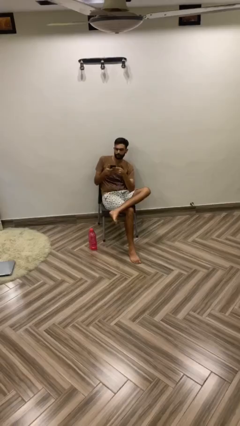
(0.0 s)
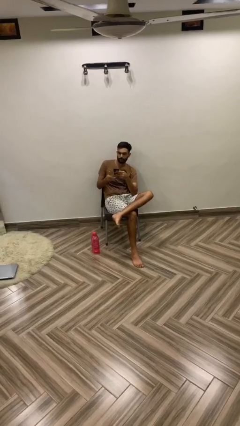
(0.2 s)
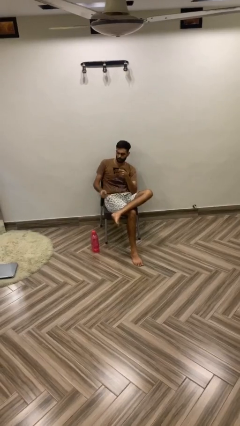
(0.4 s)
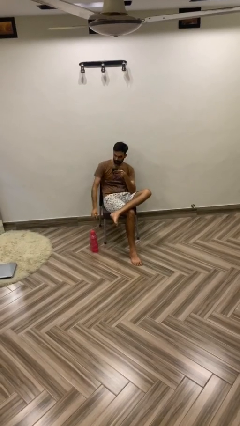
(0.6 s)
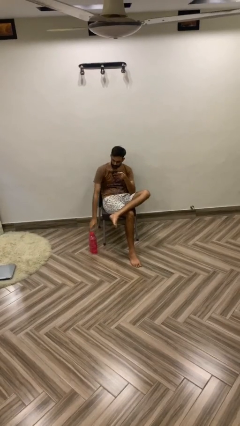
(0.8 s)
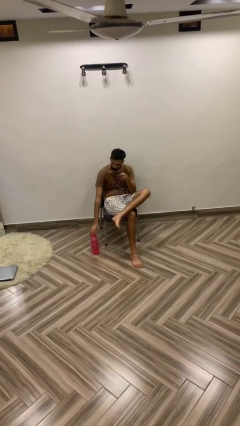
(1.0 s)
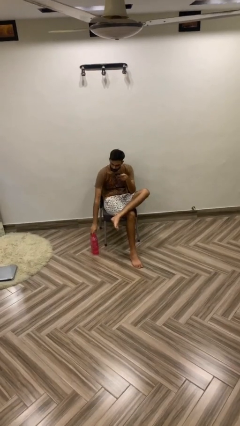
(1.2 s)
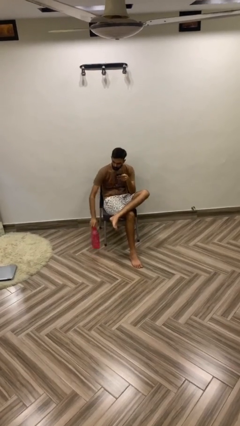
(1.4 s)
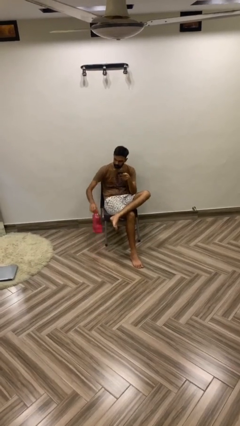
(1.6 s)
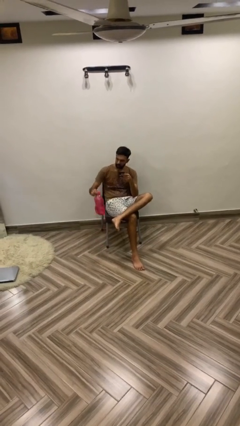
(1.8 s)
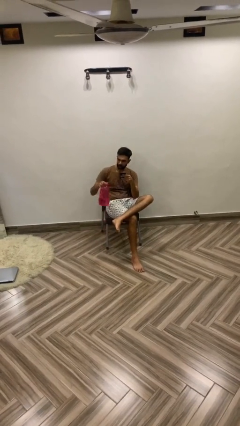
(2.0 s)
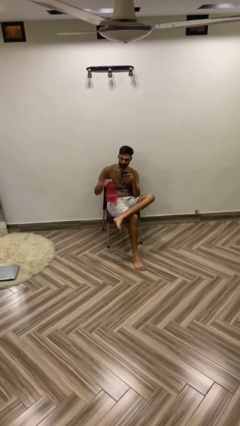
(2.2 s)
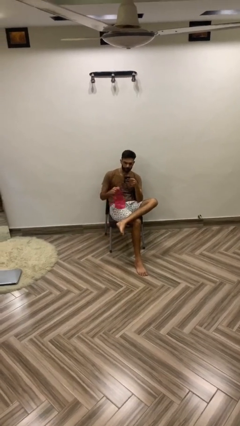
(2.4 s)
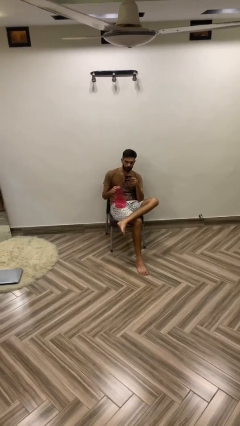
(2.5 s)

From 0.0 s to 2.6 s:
person picks up object from floor

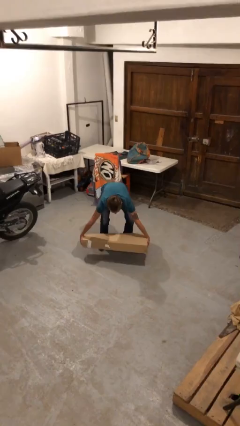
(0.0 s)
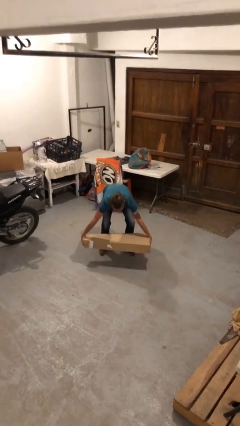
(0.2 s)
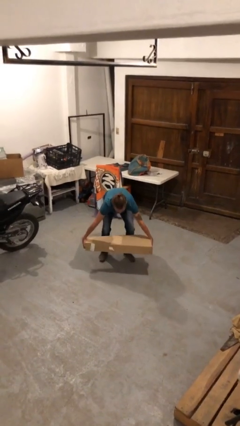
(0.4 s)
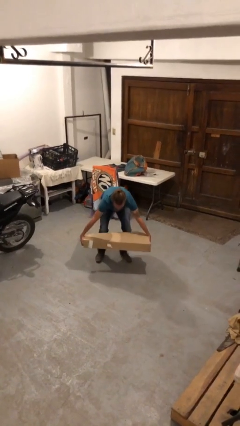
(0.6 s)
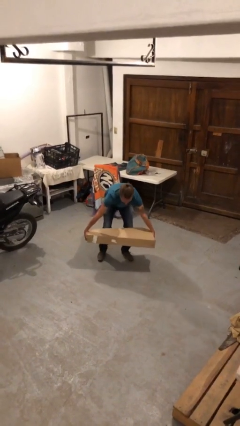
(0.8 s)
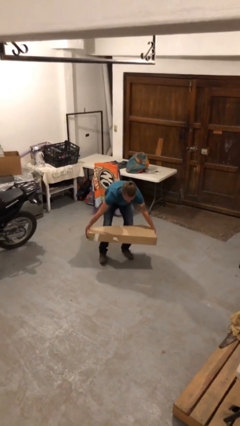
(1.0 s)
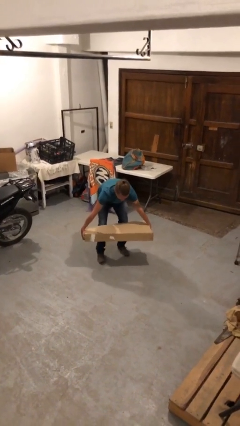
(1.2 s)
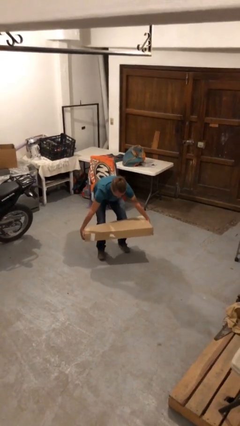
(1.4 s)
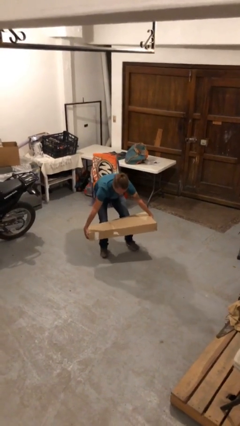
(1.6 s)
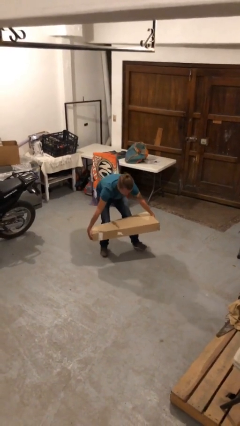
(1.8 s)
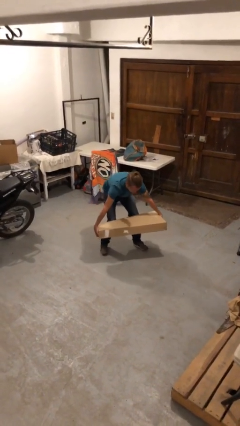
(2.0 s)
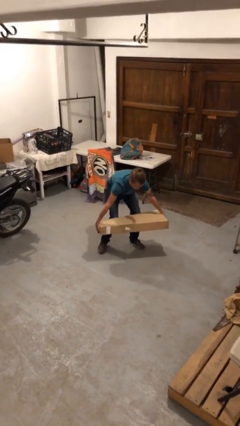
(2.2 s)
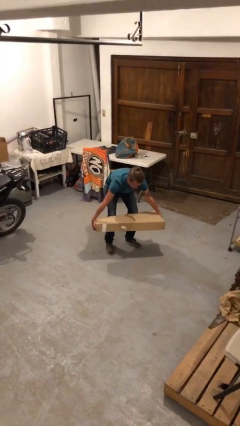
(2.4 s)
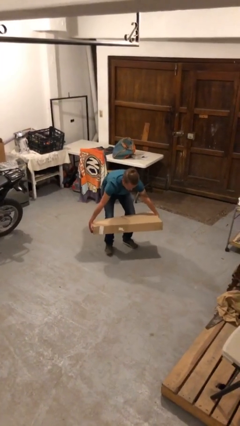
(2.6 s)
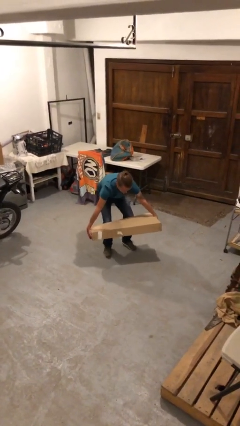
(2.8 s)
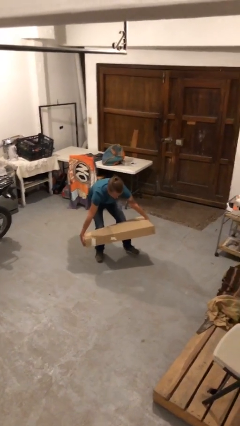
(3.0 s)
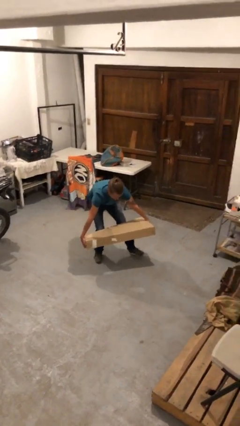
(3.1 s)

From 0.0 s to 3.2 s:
person carries heavy object

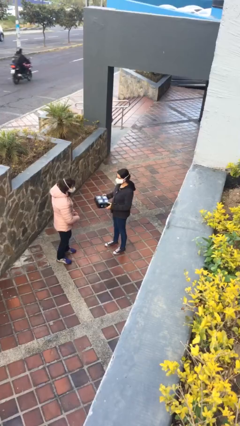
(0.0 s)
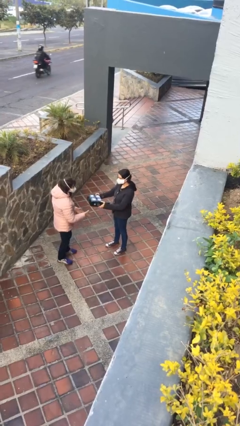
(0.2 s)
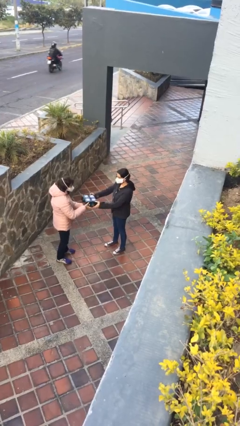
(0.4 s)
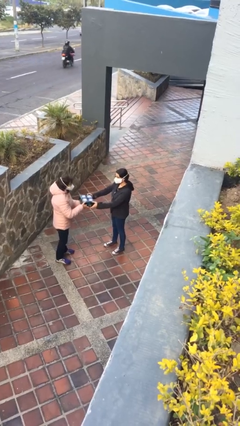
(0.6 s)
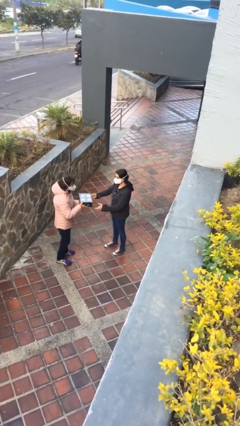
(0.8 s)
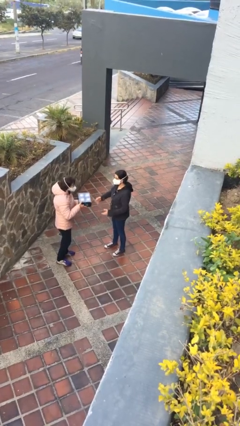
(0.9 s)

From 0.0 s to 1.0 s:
person transfers object to person

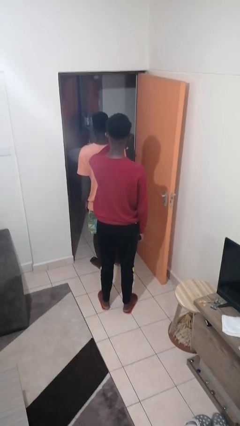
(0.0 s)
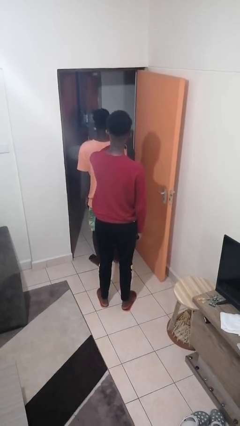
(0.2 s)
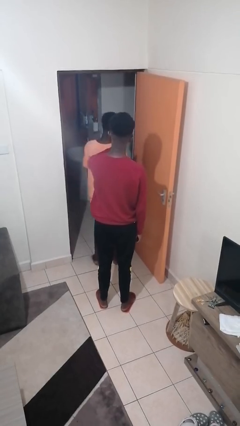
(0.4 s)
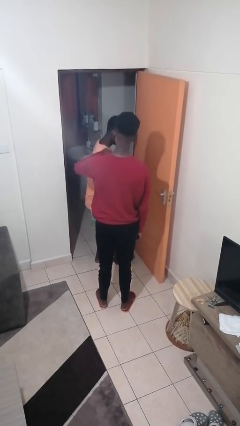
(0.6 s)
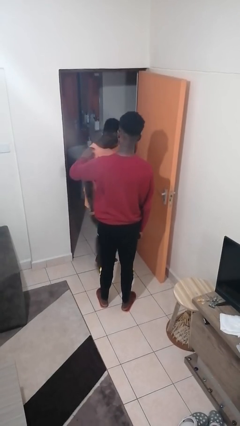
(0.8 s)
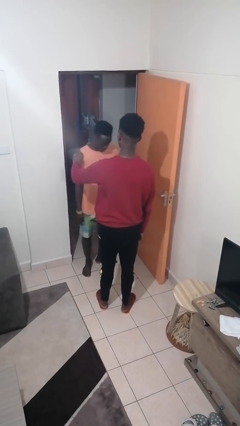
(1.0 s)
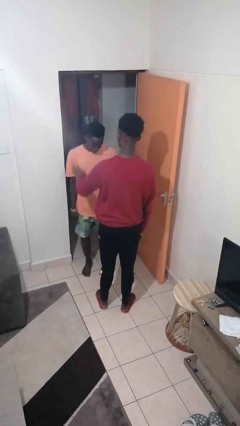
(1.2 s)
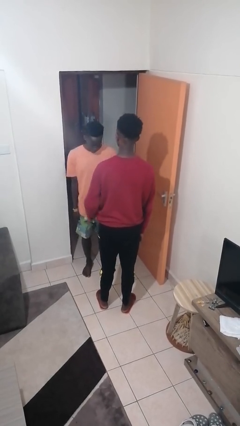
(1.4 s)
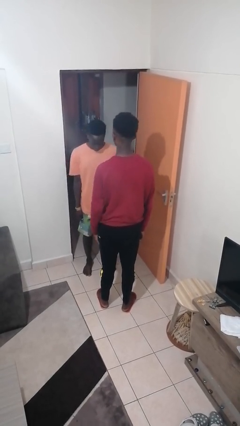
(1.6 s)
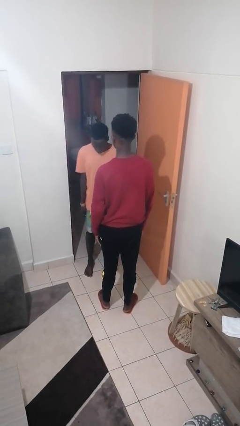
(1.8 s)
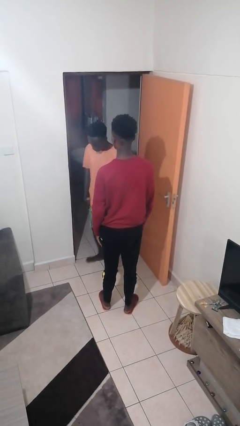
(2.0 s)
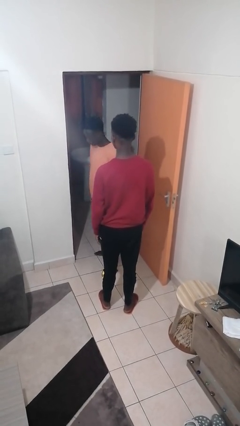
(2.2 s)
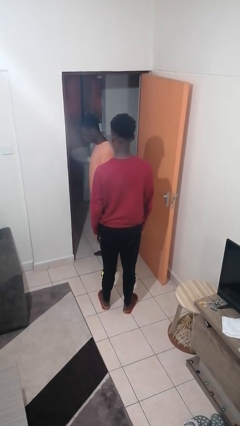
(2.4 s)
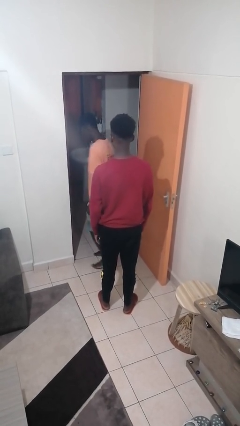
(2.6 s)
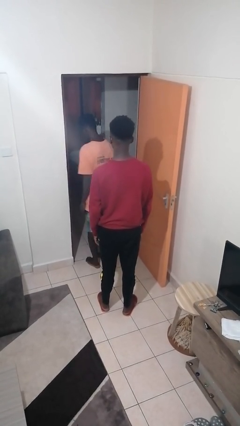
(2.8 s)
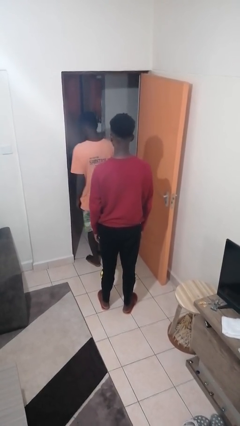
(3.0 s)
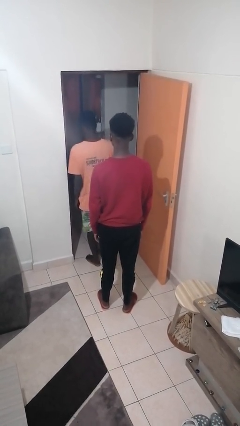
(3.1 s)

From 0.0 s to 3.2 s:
person spins person around

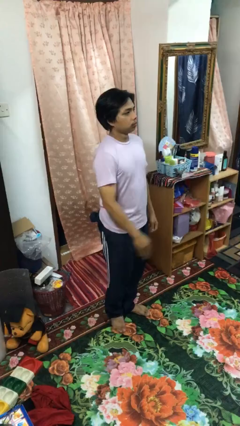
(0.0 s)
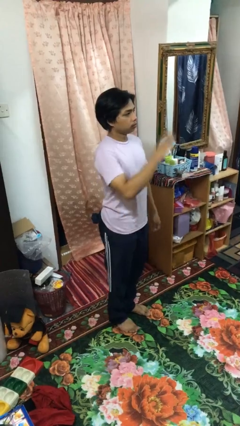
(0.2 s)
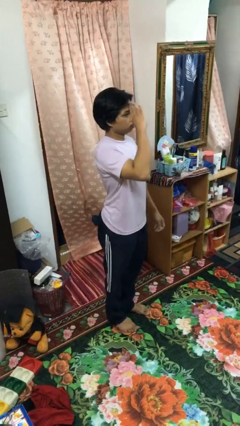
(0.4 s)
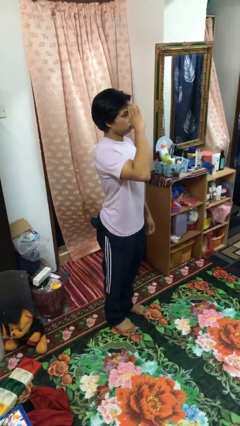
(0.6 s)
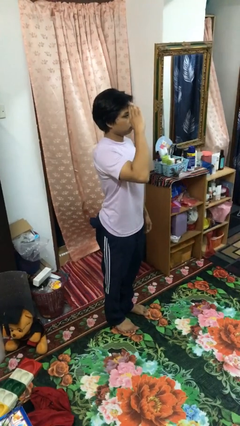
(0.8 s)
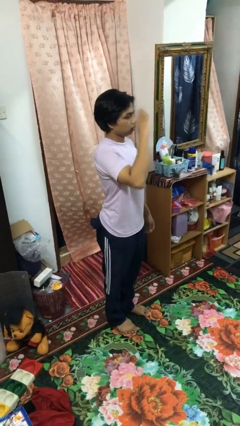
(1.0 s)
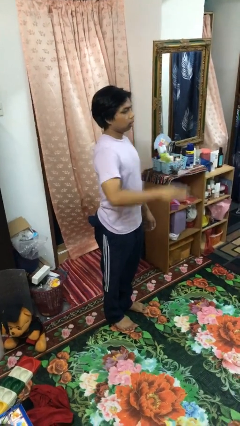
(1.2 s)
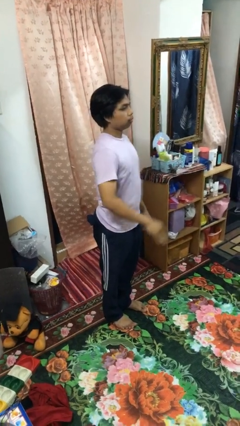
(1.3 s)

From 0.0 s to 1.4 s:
person salutes

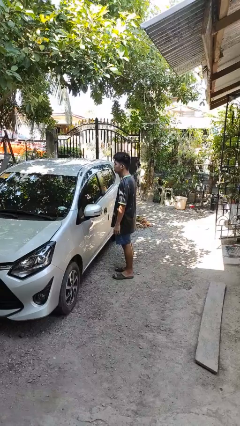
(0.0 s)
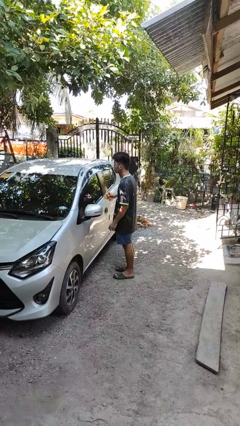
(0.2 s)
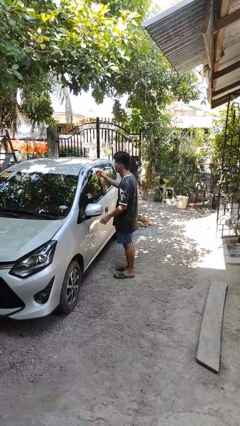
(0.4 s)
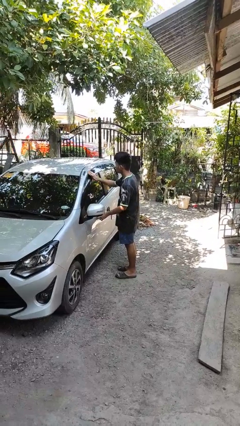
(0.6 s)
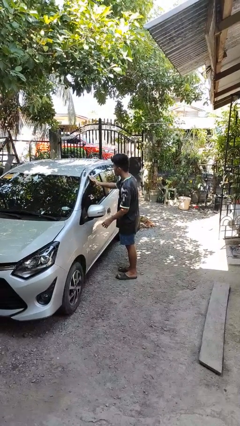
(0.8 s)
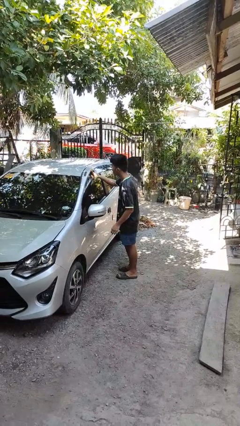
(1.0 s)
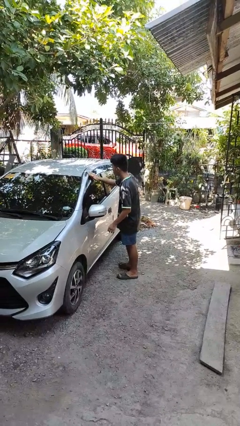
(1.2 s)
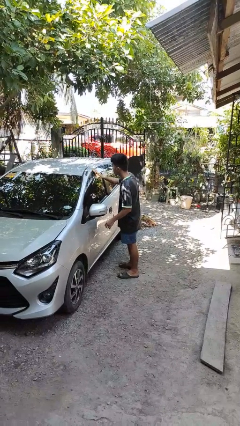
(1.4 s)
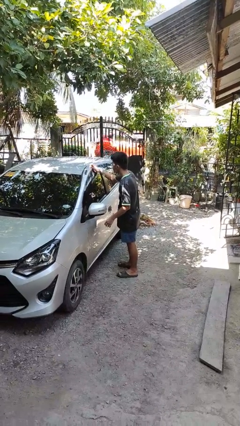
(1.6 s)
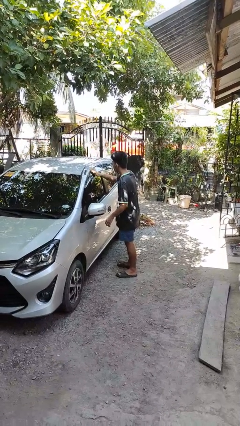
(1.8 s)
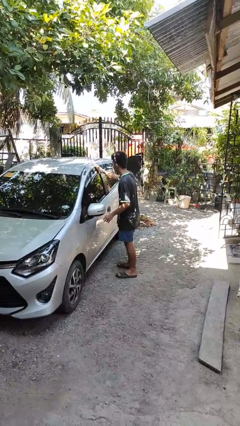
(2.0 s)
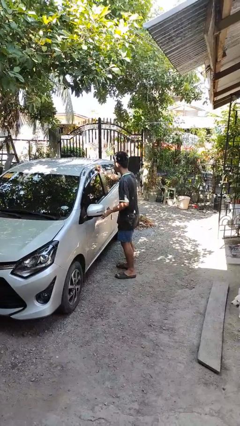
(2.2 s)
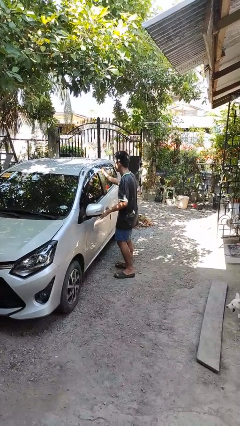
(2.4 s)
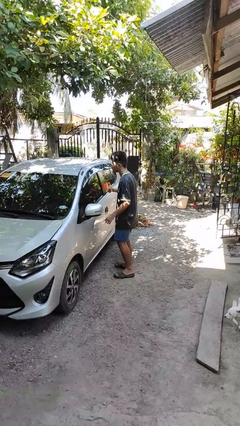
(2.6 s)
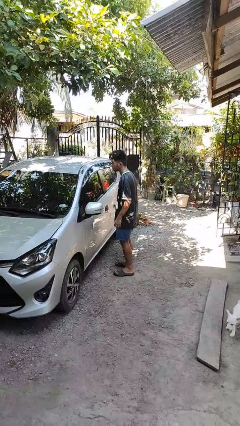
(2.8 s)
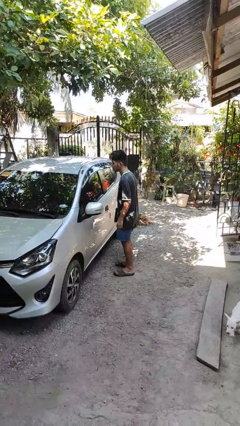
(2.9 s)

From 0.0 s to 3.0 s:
person polishes car with rag

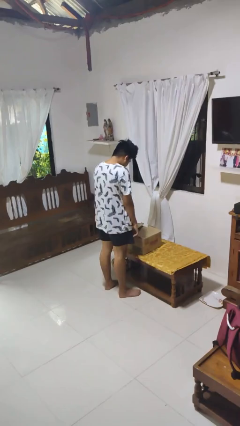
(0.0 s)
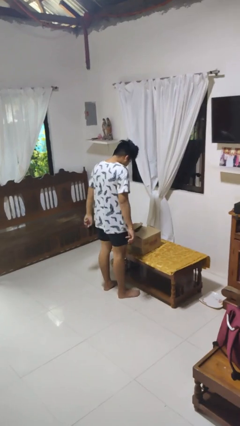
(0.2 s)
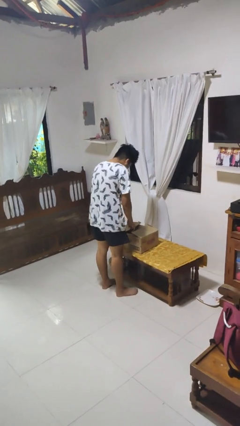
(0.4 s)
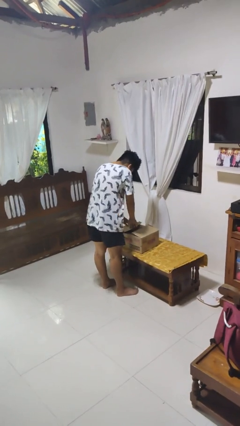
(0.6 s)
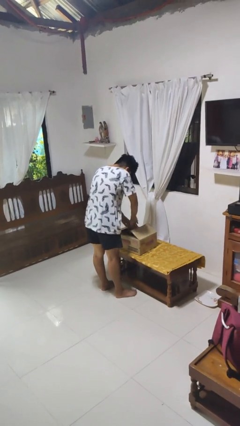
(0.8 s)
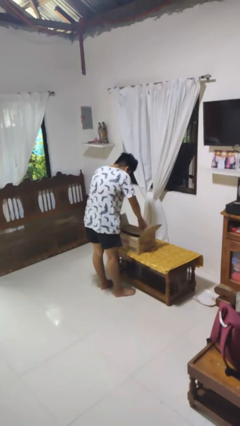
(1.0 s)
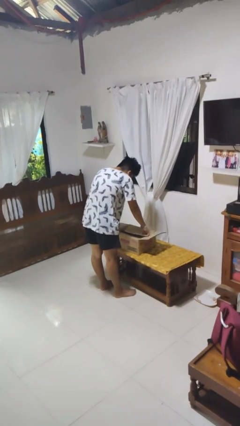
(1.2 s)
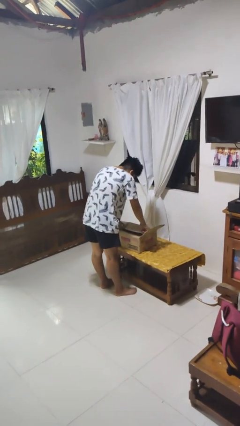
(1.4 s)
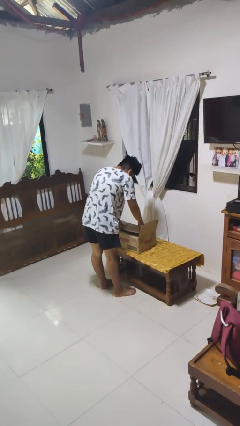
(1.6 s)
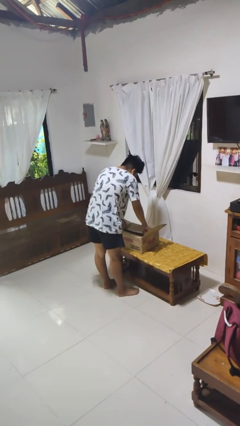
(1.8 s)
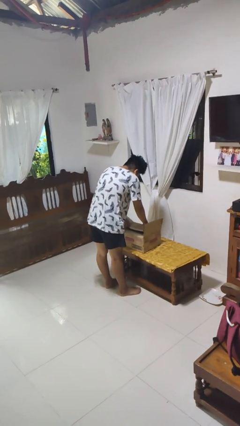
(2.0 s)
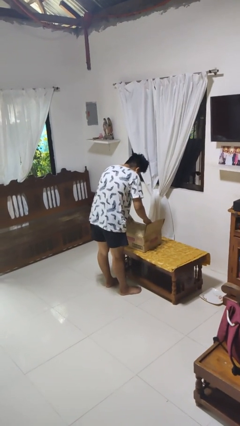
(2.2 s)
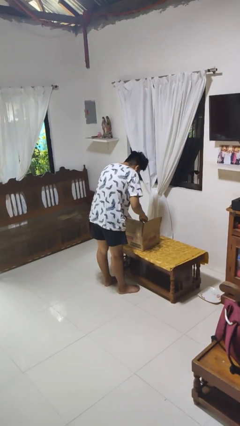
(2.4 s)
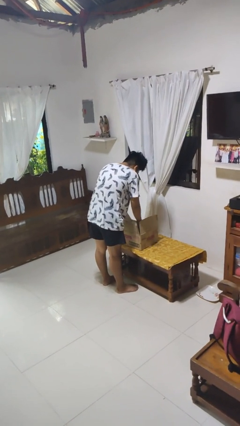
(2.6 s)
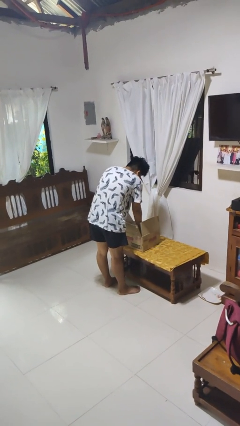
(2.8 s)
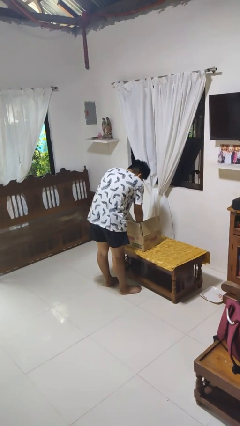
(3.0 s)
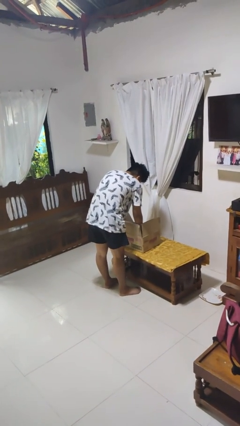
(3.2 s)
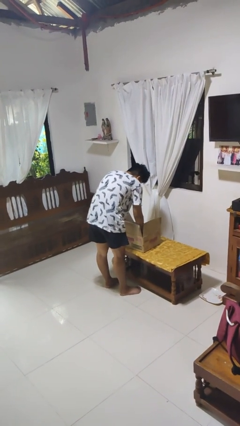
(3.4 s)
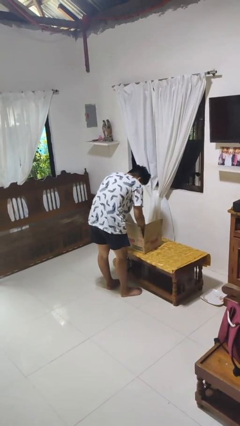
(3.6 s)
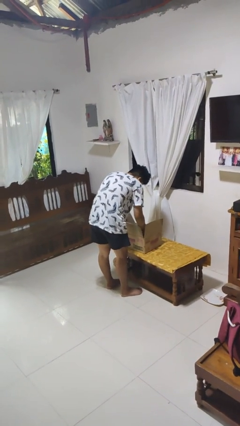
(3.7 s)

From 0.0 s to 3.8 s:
person searches in box
